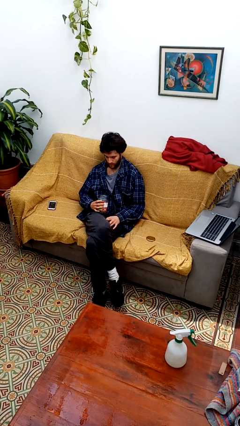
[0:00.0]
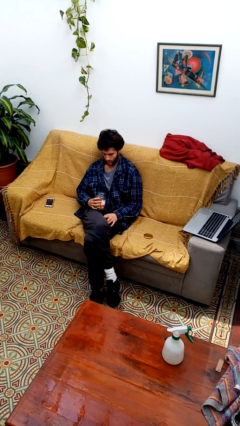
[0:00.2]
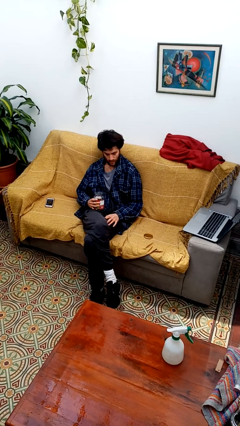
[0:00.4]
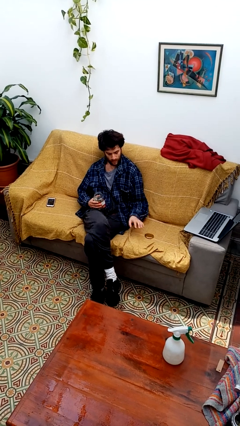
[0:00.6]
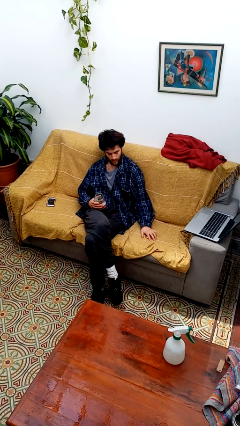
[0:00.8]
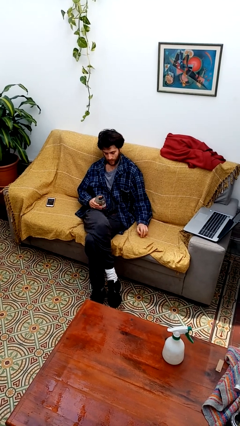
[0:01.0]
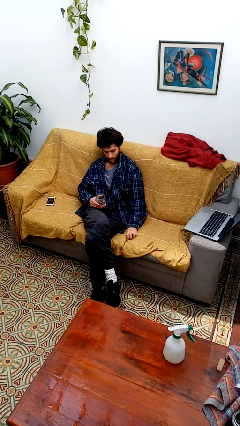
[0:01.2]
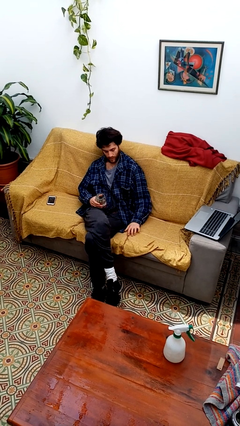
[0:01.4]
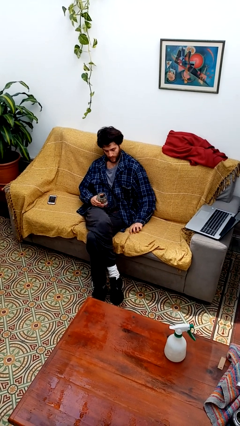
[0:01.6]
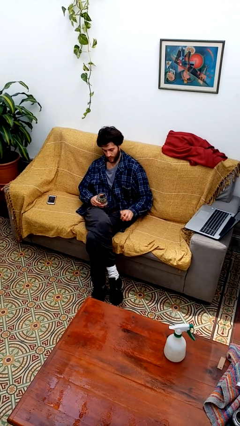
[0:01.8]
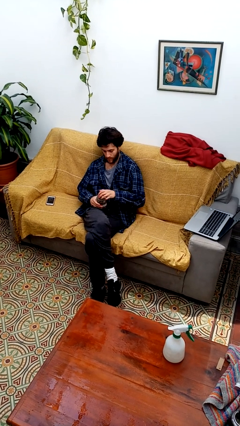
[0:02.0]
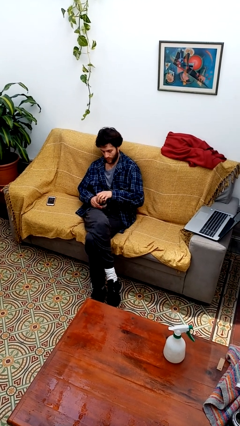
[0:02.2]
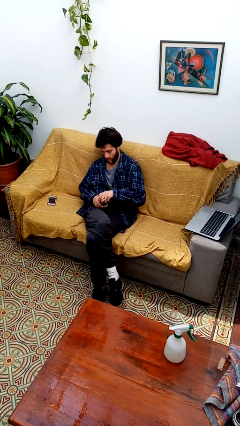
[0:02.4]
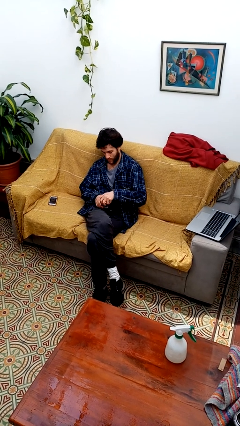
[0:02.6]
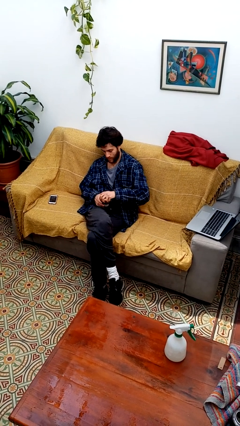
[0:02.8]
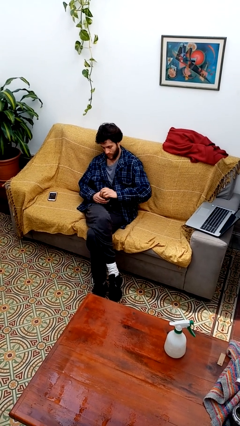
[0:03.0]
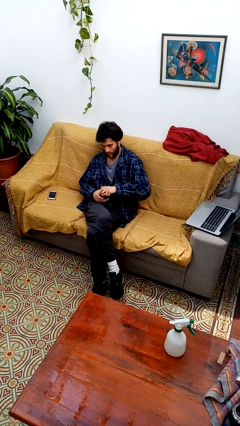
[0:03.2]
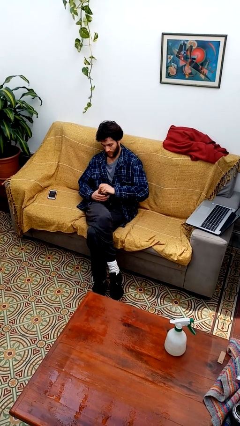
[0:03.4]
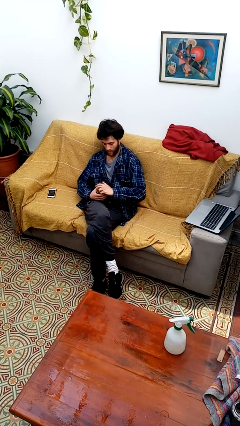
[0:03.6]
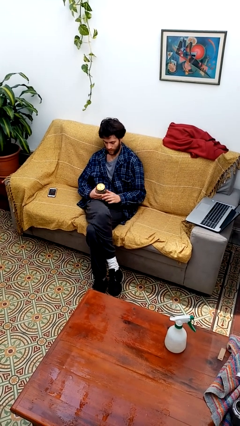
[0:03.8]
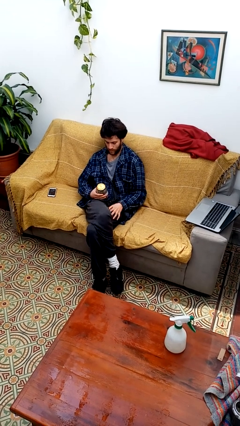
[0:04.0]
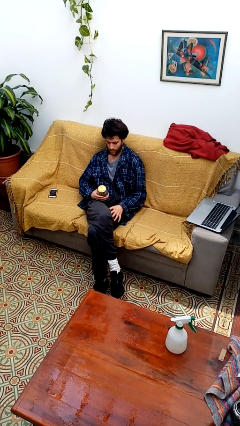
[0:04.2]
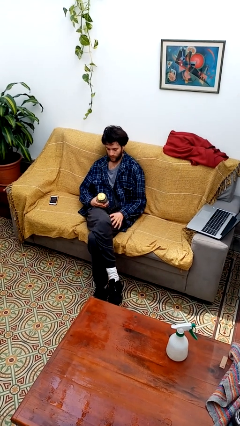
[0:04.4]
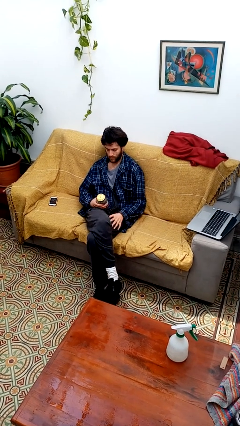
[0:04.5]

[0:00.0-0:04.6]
person closes jar

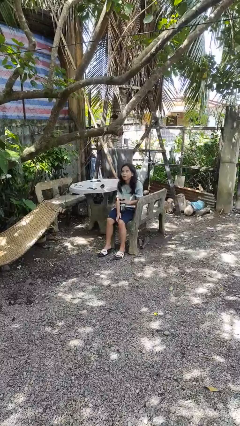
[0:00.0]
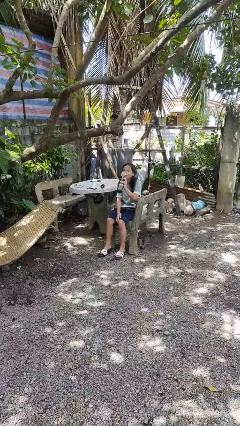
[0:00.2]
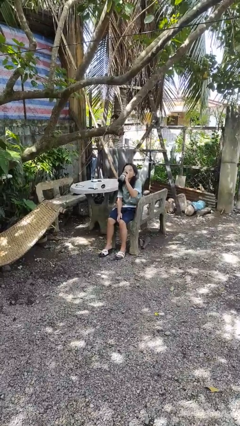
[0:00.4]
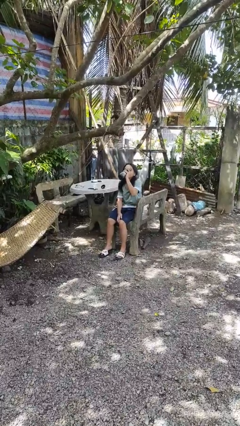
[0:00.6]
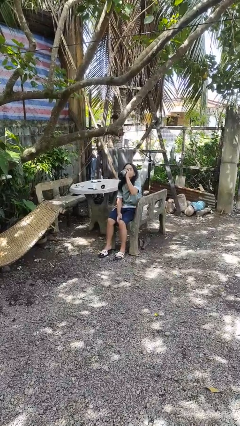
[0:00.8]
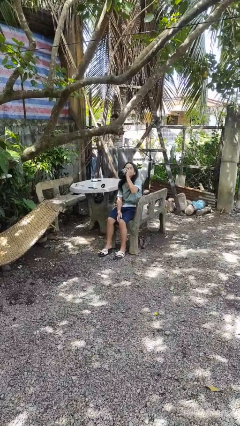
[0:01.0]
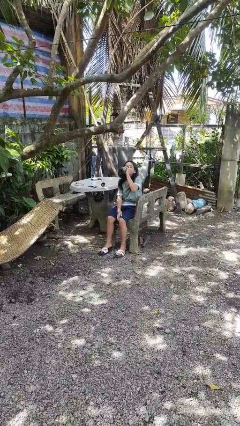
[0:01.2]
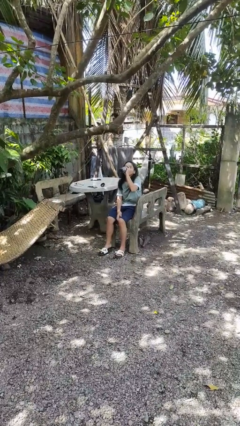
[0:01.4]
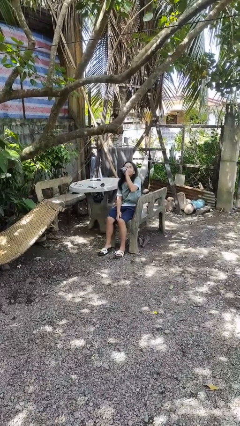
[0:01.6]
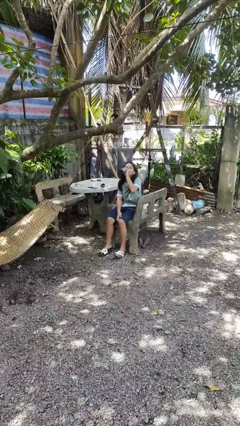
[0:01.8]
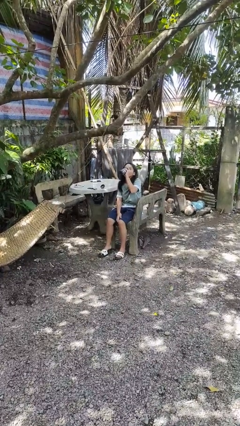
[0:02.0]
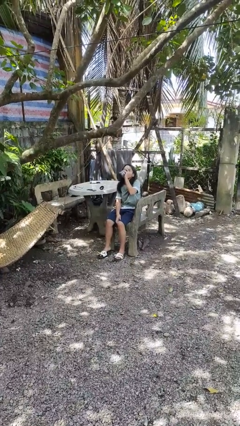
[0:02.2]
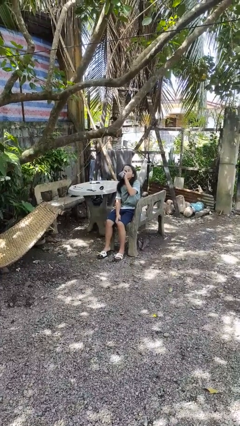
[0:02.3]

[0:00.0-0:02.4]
person drinks from bottle

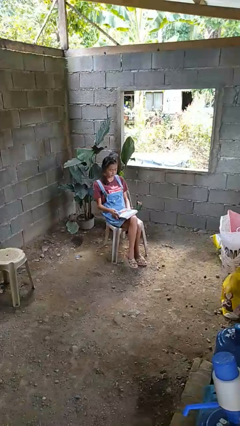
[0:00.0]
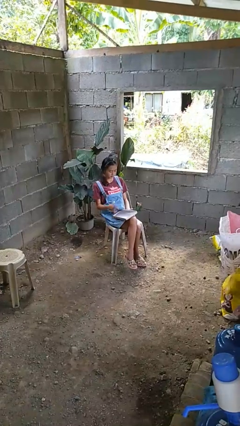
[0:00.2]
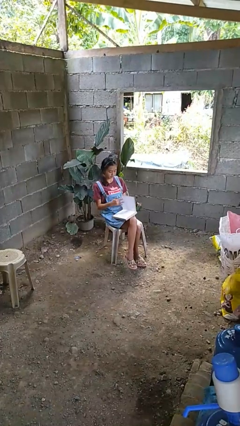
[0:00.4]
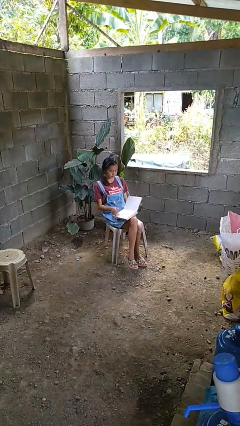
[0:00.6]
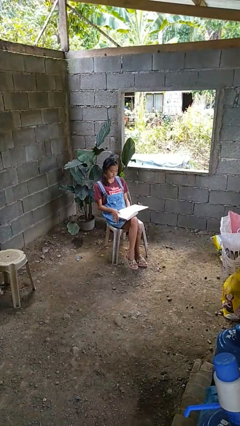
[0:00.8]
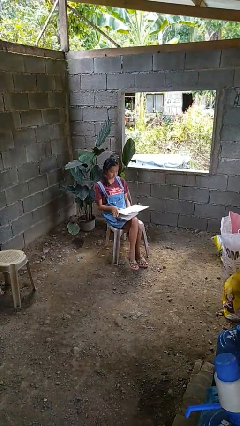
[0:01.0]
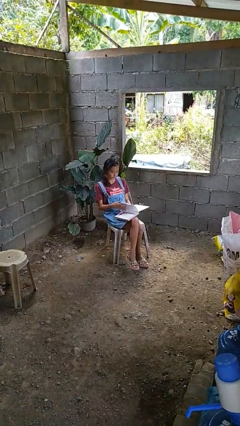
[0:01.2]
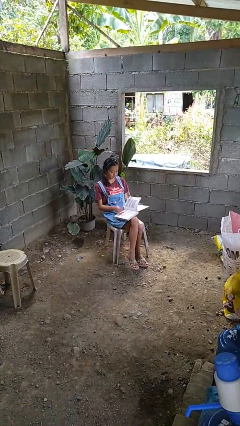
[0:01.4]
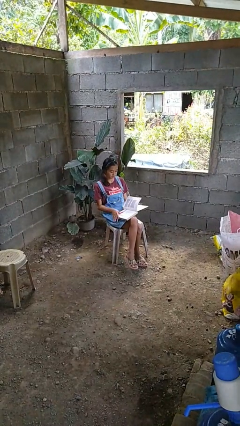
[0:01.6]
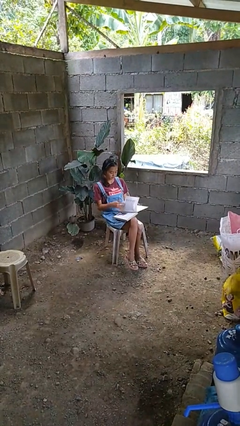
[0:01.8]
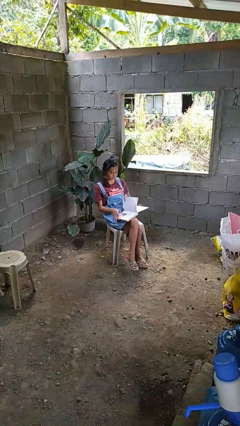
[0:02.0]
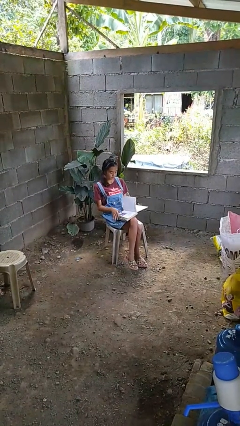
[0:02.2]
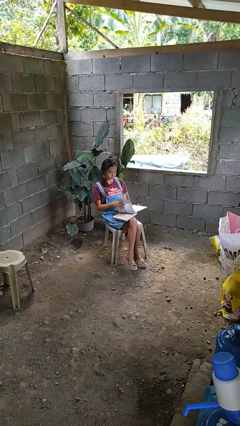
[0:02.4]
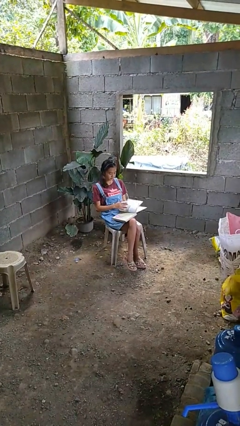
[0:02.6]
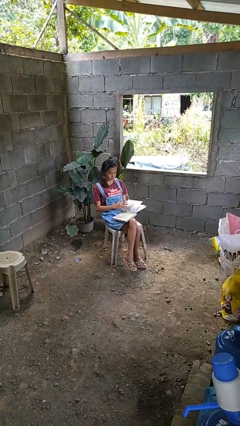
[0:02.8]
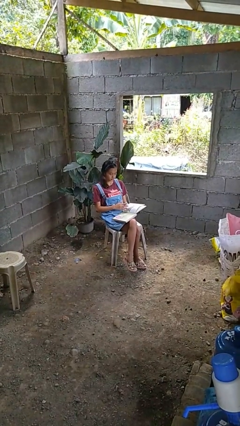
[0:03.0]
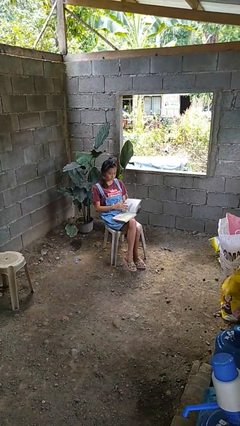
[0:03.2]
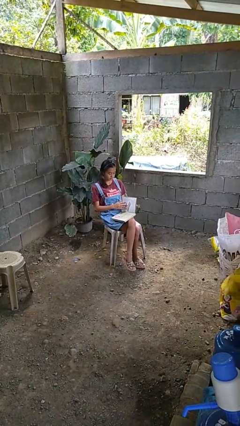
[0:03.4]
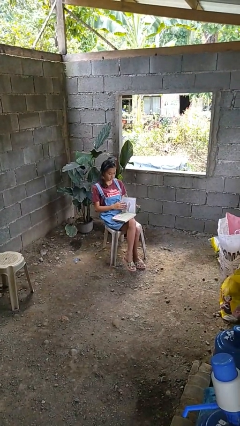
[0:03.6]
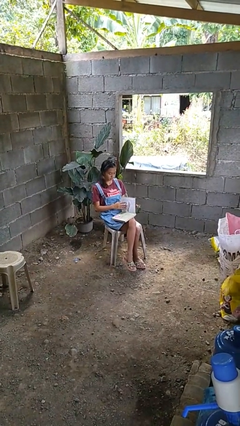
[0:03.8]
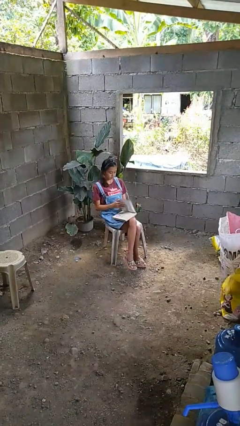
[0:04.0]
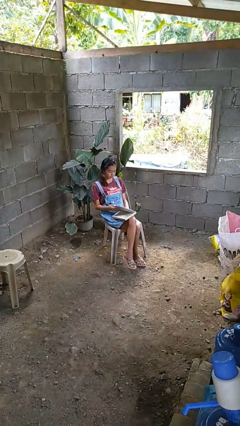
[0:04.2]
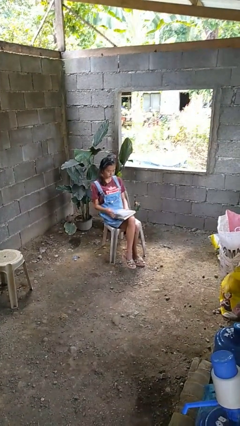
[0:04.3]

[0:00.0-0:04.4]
person reads book

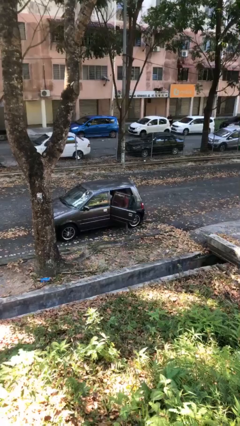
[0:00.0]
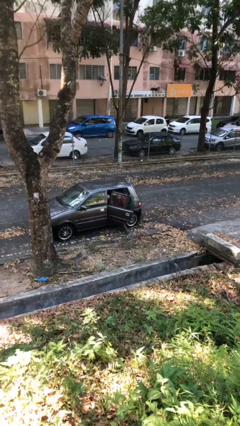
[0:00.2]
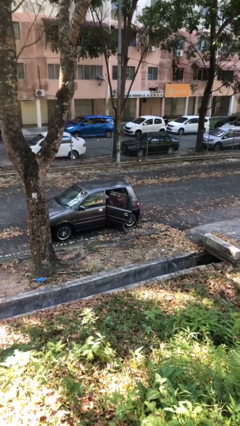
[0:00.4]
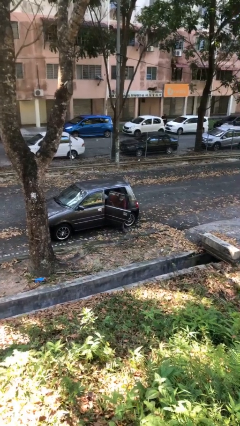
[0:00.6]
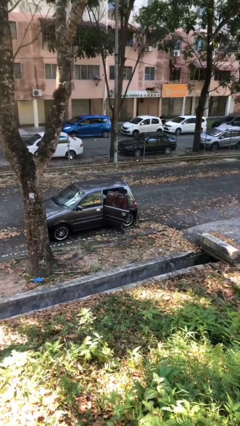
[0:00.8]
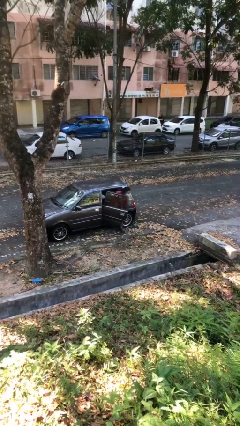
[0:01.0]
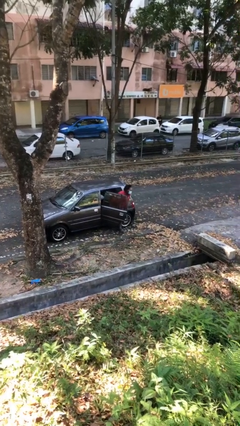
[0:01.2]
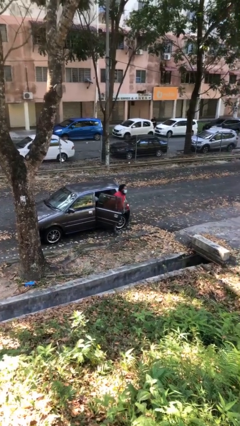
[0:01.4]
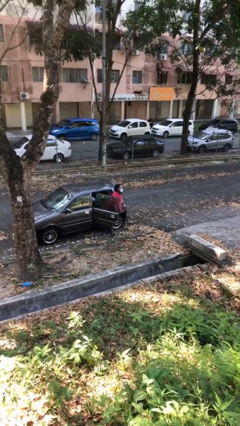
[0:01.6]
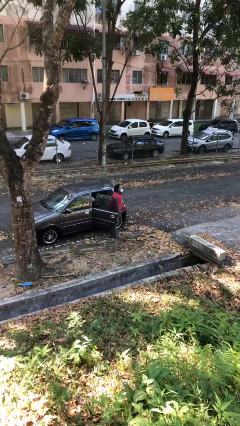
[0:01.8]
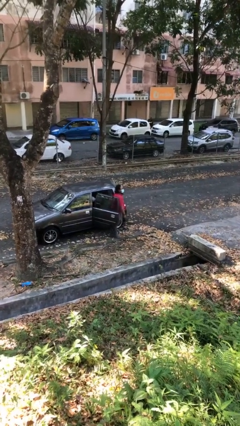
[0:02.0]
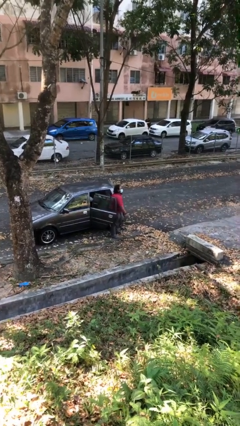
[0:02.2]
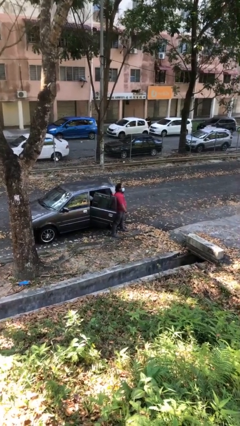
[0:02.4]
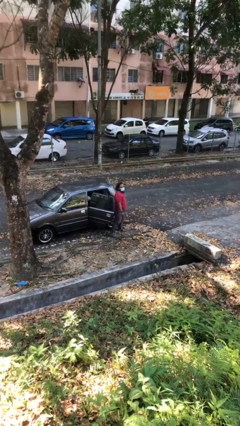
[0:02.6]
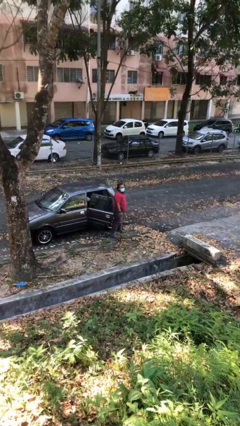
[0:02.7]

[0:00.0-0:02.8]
person exits car

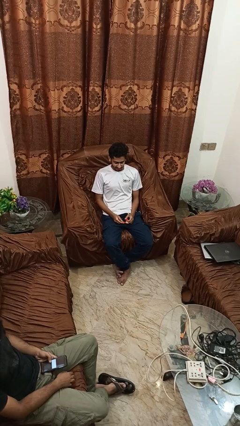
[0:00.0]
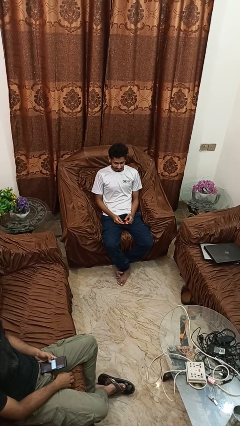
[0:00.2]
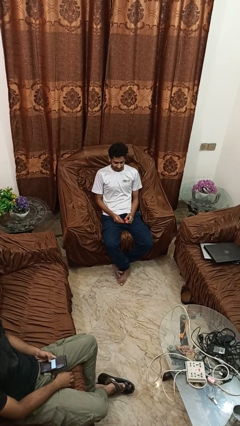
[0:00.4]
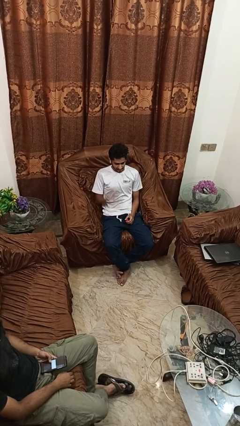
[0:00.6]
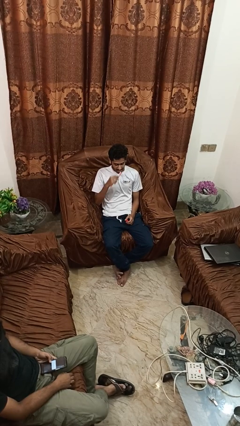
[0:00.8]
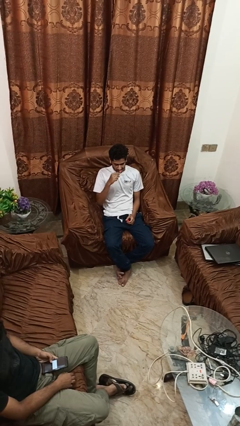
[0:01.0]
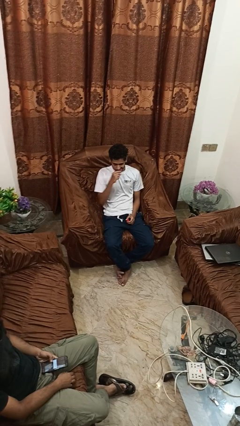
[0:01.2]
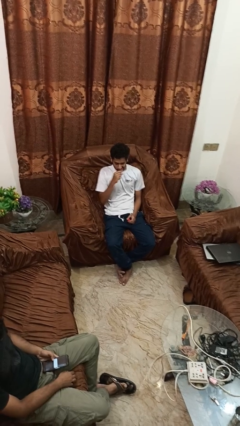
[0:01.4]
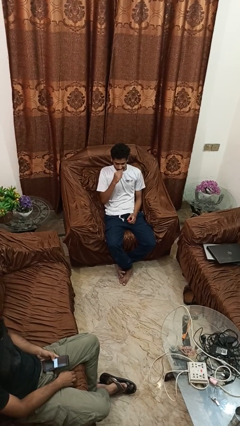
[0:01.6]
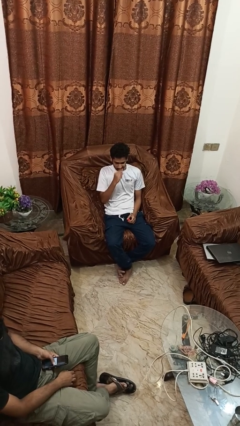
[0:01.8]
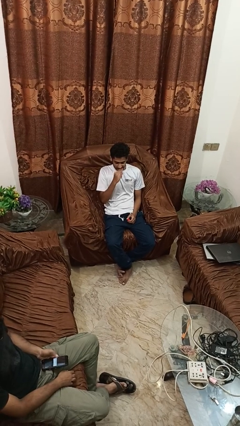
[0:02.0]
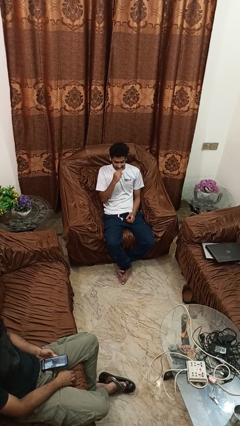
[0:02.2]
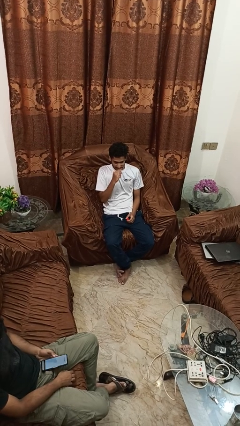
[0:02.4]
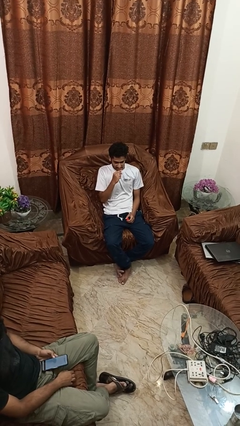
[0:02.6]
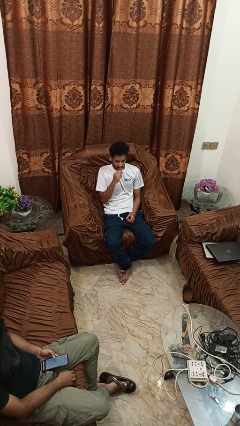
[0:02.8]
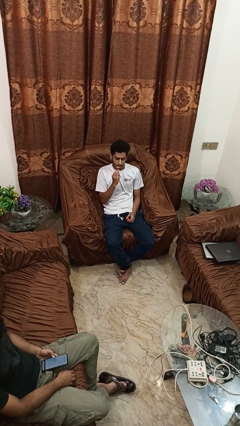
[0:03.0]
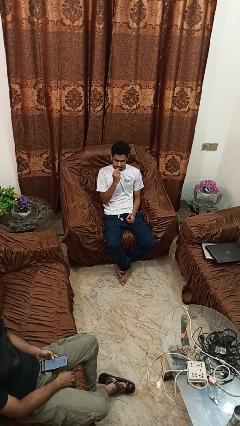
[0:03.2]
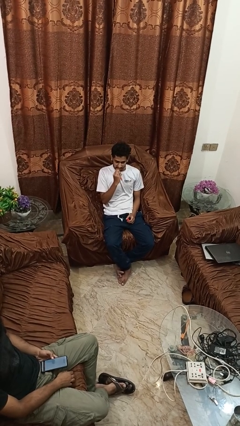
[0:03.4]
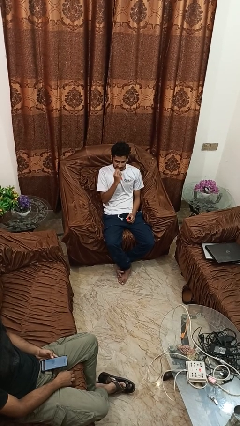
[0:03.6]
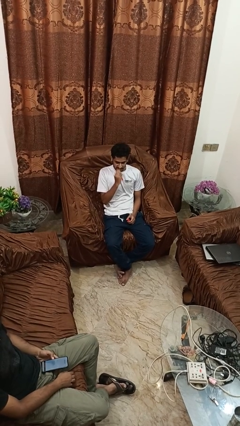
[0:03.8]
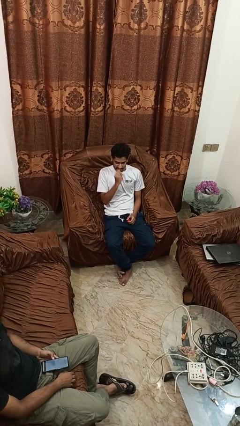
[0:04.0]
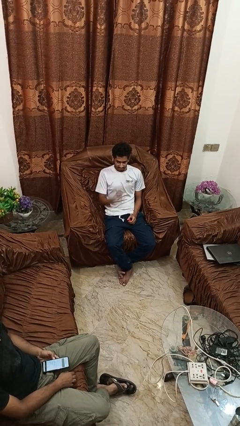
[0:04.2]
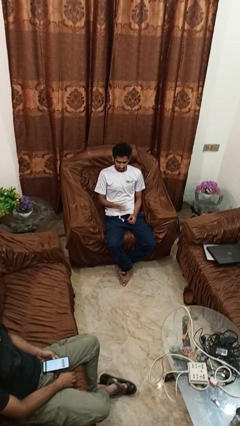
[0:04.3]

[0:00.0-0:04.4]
person brushes teeth
